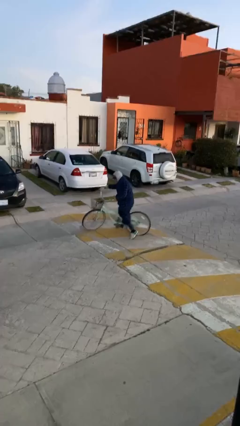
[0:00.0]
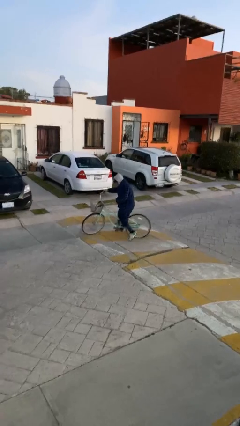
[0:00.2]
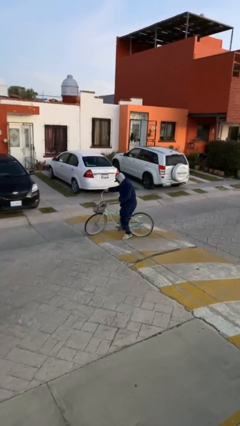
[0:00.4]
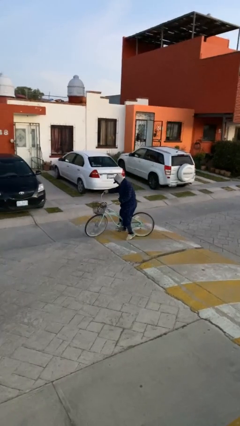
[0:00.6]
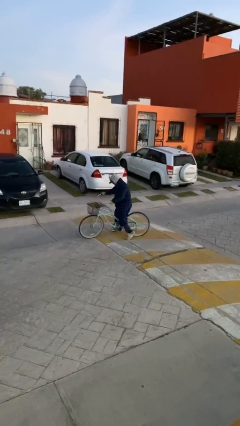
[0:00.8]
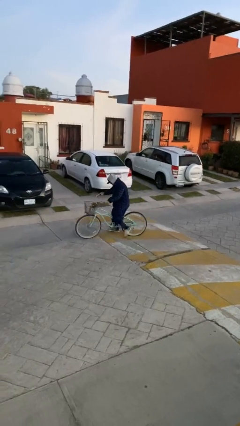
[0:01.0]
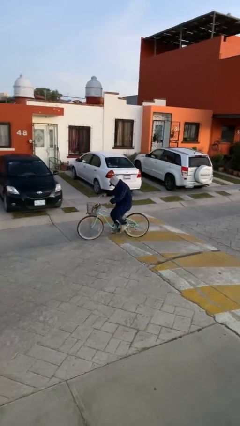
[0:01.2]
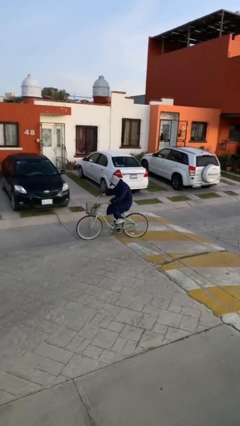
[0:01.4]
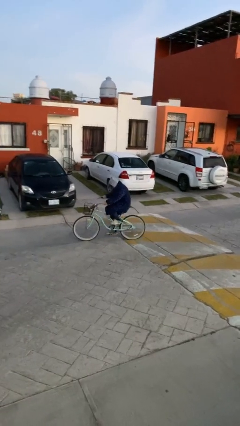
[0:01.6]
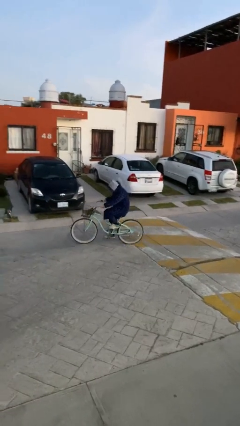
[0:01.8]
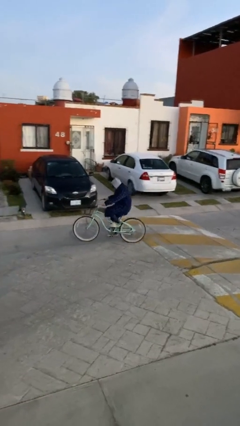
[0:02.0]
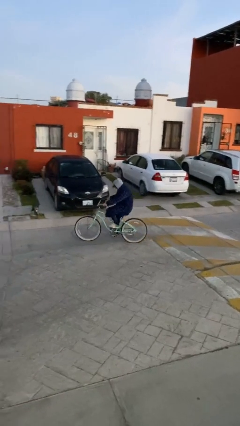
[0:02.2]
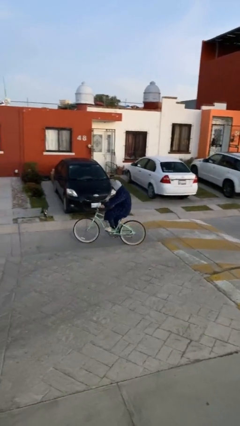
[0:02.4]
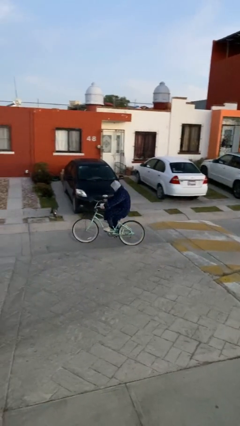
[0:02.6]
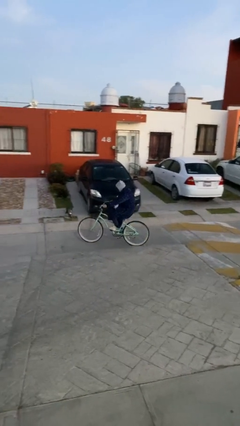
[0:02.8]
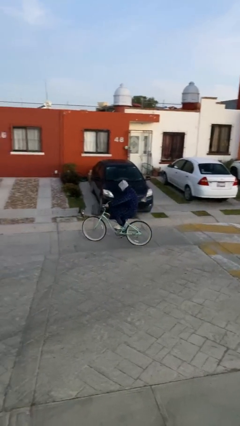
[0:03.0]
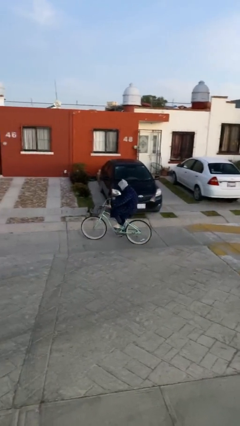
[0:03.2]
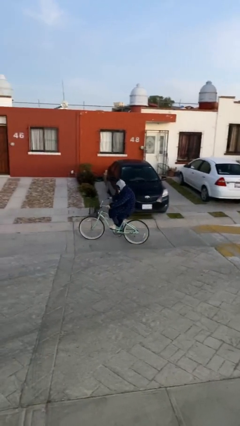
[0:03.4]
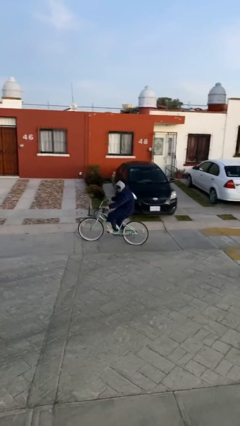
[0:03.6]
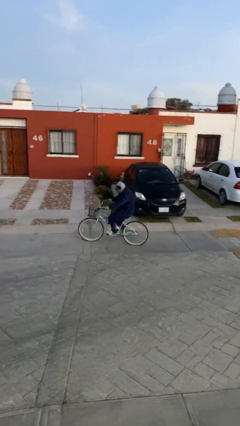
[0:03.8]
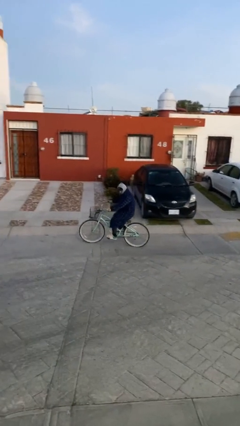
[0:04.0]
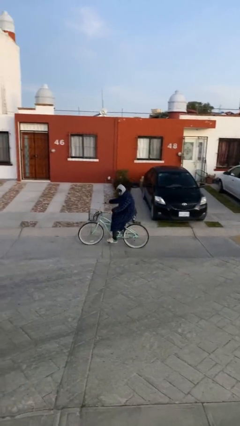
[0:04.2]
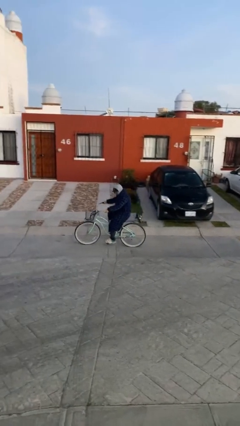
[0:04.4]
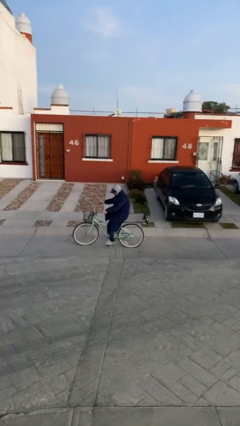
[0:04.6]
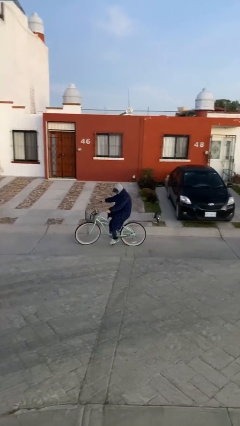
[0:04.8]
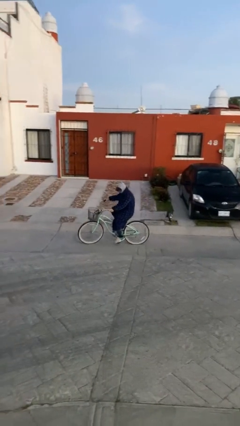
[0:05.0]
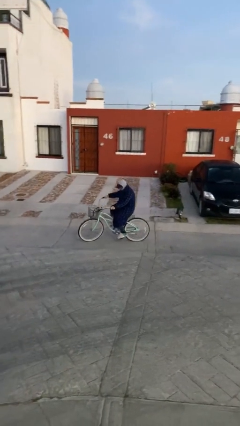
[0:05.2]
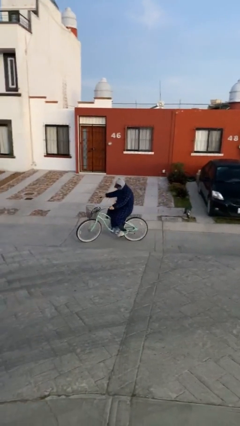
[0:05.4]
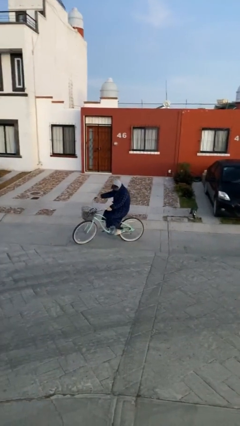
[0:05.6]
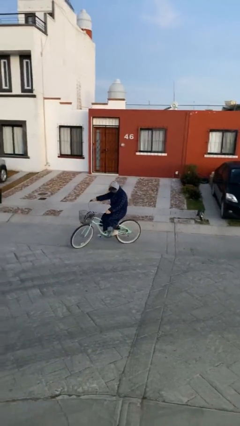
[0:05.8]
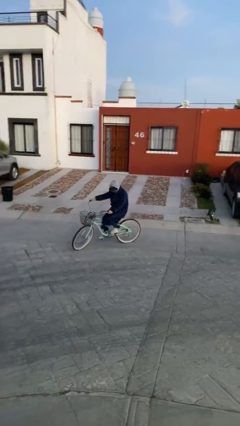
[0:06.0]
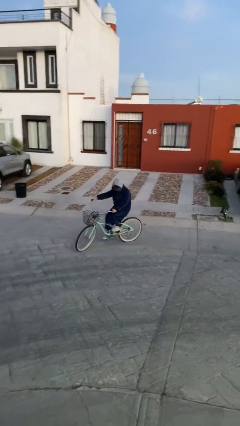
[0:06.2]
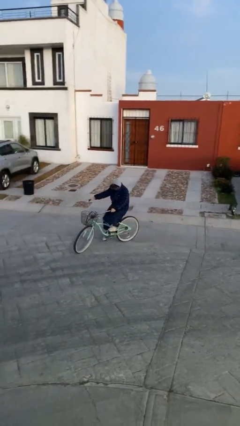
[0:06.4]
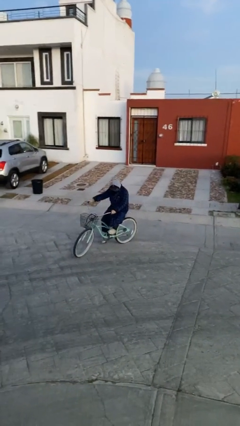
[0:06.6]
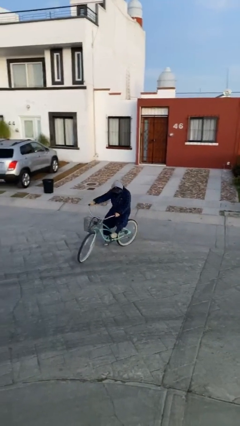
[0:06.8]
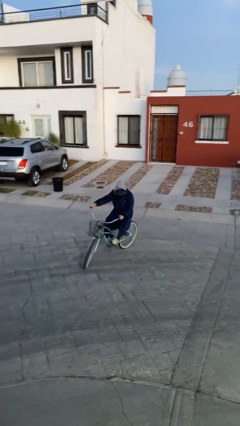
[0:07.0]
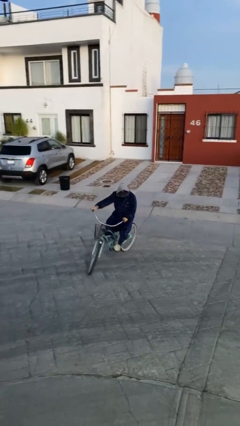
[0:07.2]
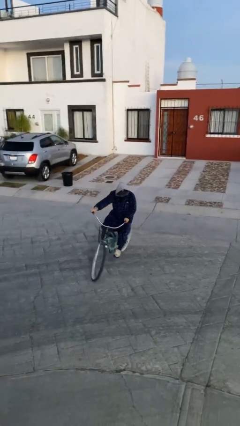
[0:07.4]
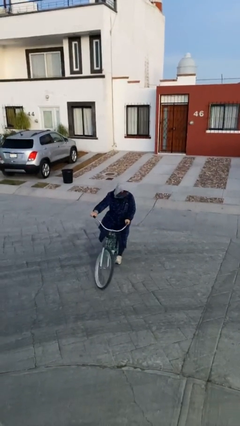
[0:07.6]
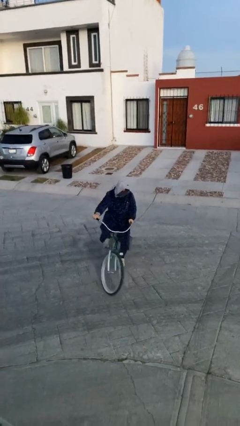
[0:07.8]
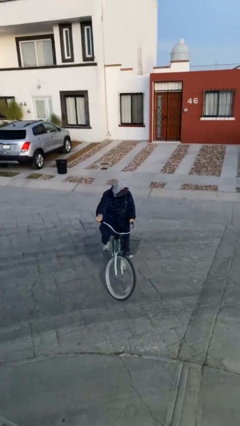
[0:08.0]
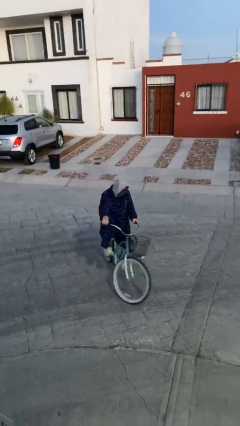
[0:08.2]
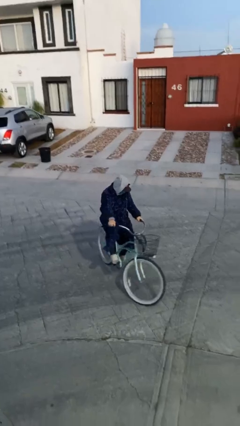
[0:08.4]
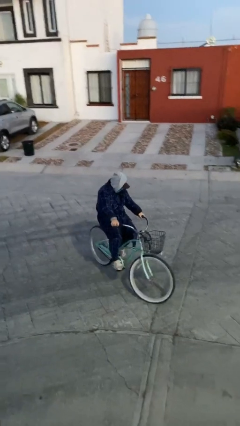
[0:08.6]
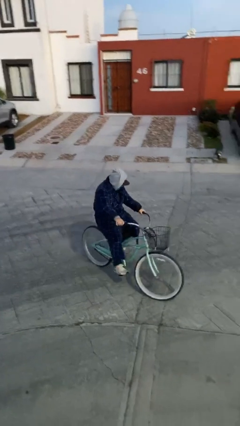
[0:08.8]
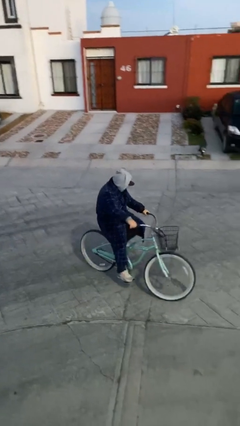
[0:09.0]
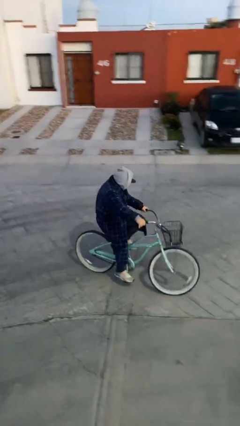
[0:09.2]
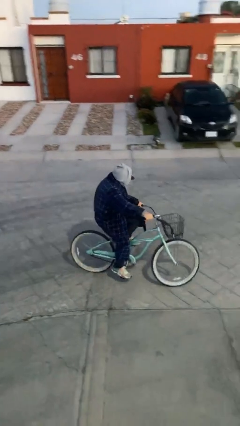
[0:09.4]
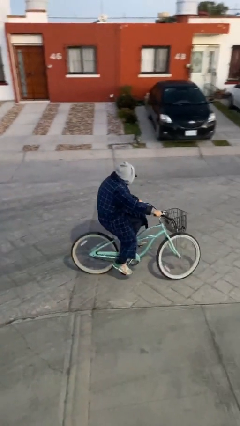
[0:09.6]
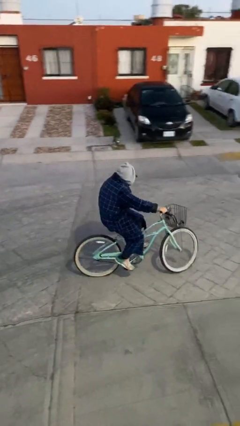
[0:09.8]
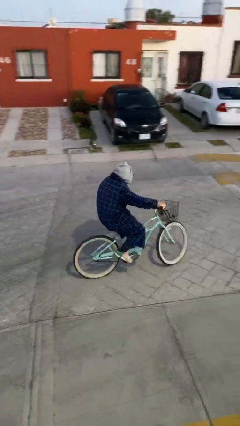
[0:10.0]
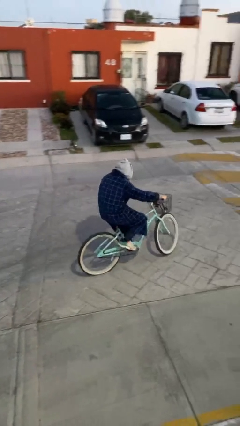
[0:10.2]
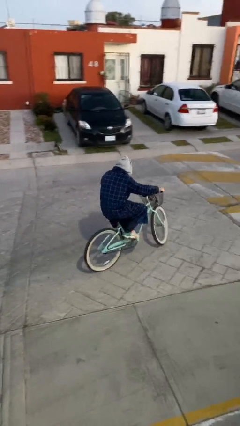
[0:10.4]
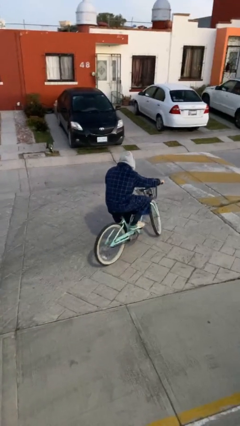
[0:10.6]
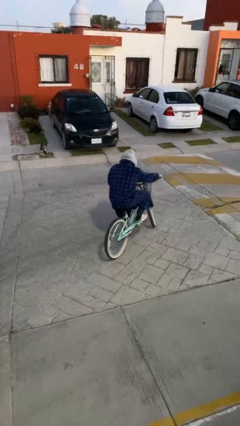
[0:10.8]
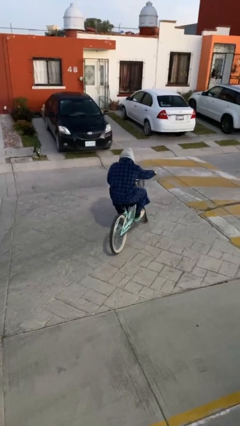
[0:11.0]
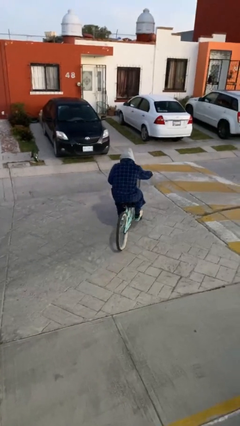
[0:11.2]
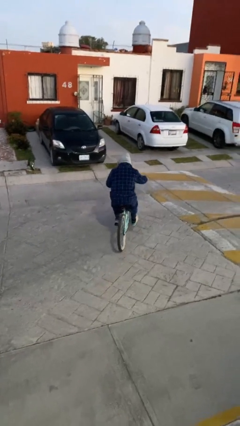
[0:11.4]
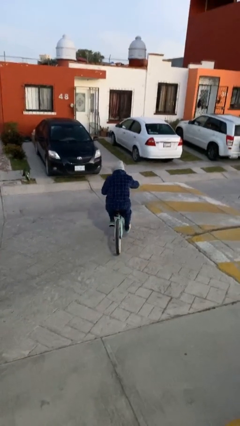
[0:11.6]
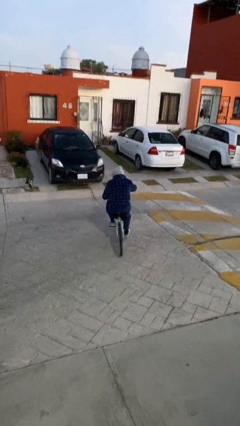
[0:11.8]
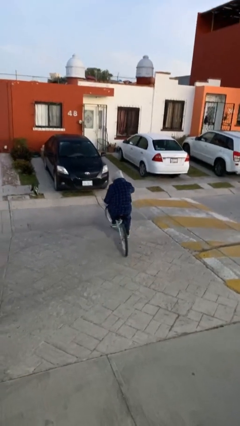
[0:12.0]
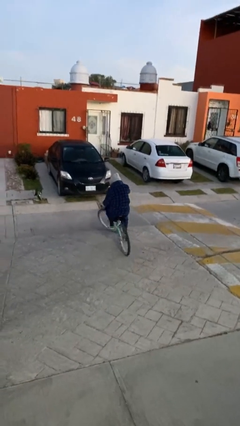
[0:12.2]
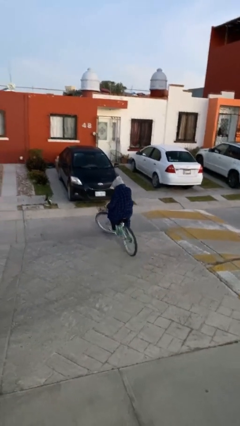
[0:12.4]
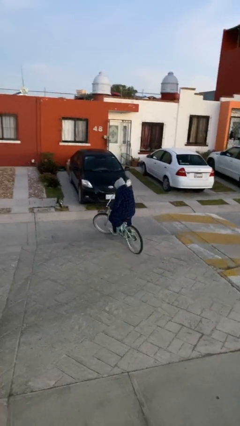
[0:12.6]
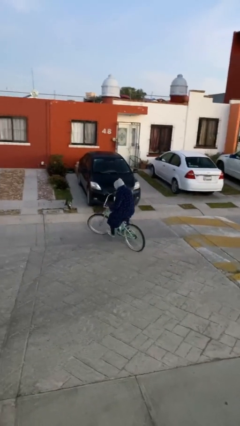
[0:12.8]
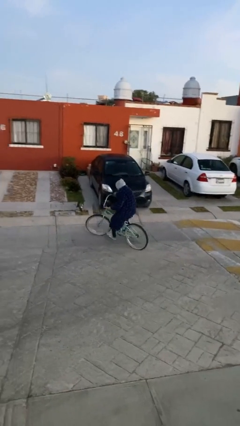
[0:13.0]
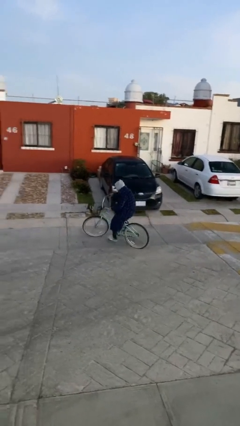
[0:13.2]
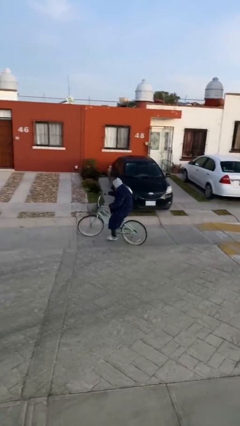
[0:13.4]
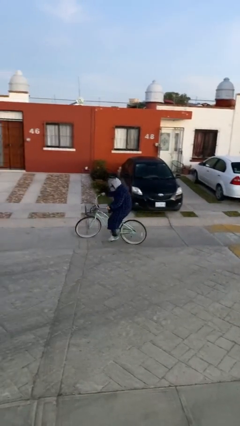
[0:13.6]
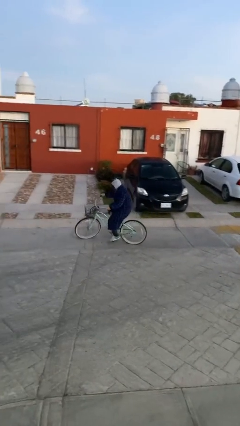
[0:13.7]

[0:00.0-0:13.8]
person rides bicycle

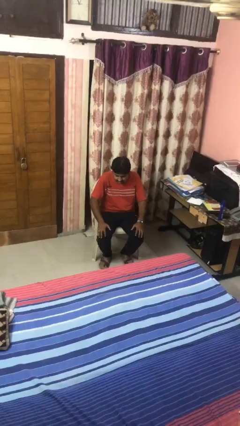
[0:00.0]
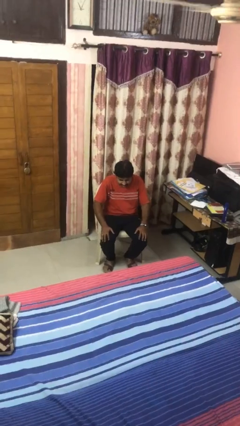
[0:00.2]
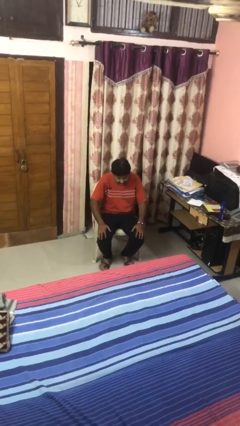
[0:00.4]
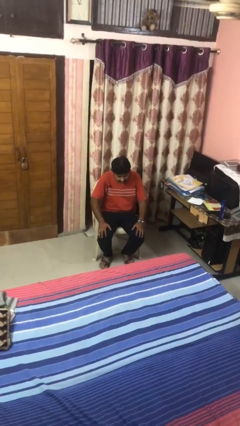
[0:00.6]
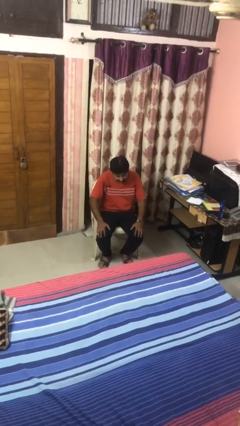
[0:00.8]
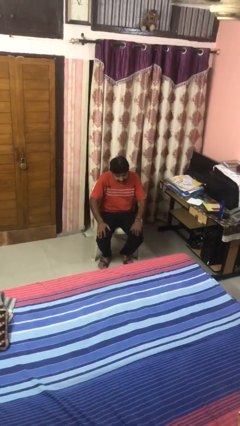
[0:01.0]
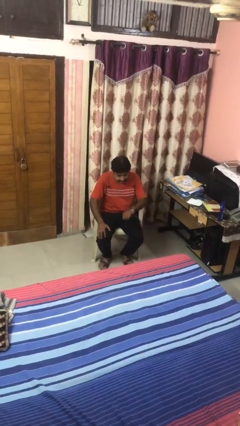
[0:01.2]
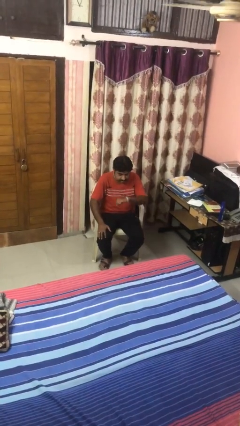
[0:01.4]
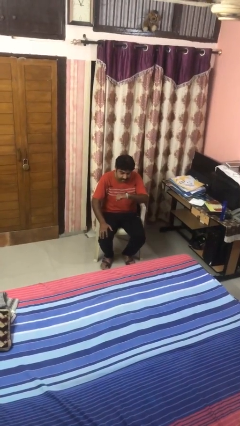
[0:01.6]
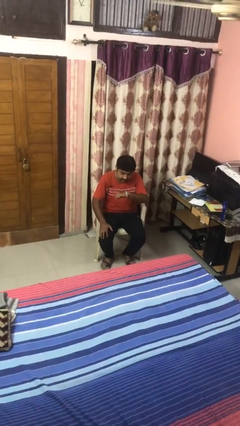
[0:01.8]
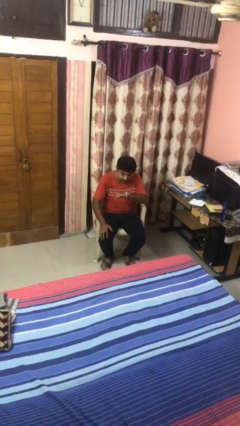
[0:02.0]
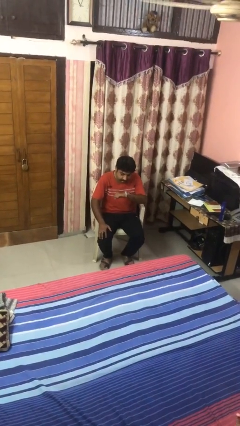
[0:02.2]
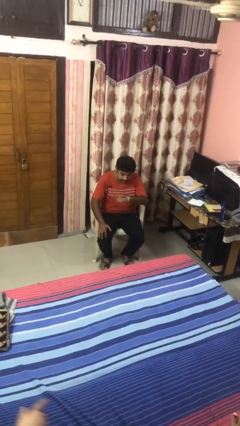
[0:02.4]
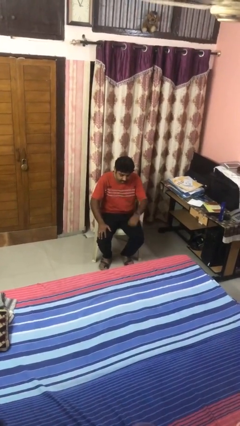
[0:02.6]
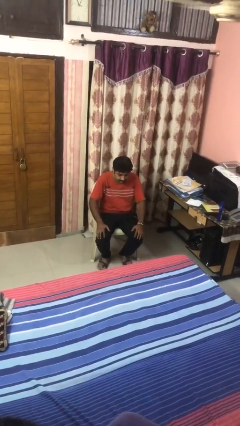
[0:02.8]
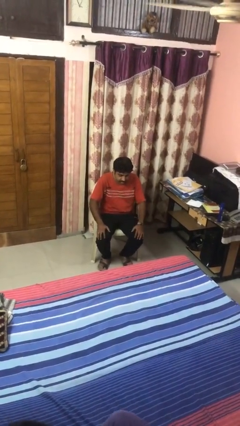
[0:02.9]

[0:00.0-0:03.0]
person looks at wristwatch

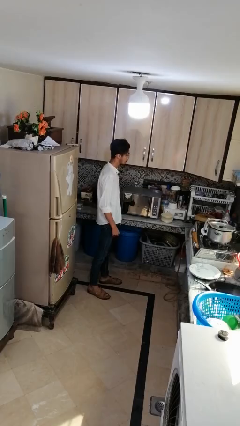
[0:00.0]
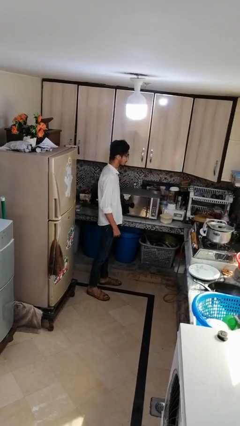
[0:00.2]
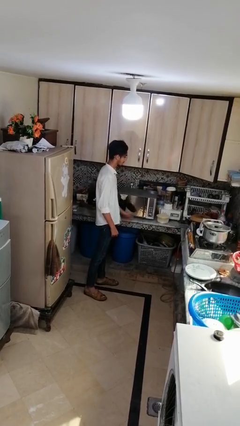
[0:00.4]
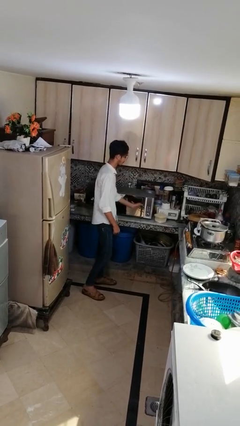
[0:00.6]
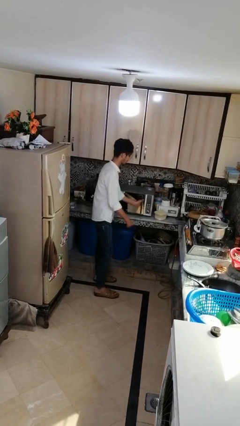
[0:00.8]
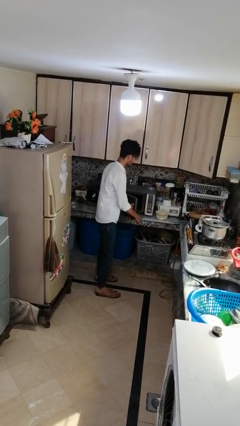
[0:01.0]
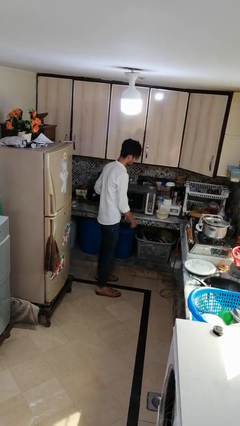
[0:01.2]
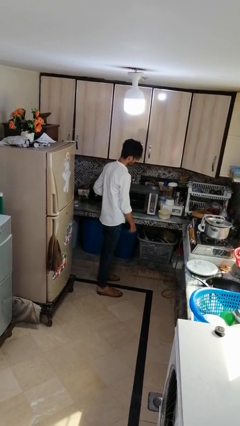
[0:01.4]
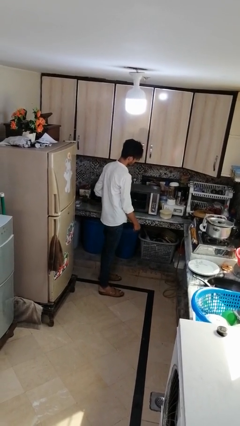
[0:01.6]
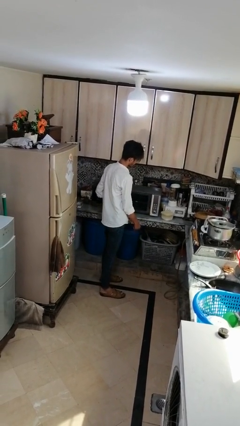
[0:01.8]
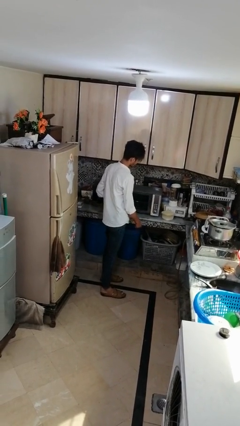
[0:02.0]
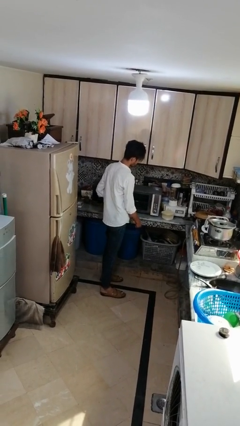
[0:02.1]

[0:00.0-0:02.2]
person opens microwave
